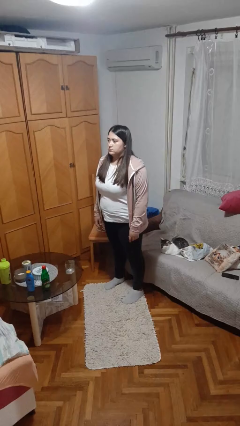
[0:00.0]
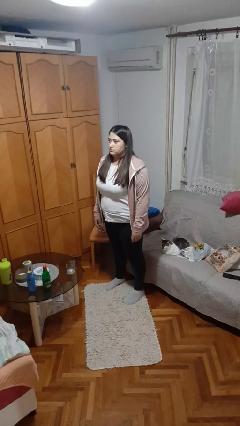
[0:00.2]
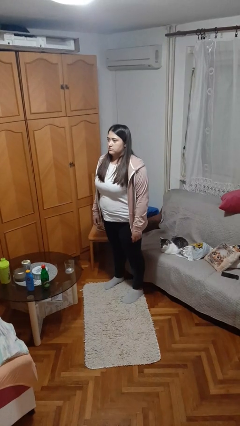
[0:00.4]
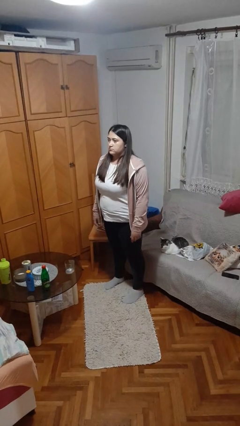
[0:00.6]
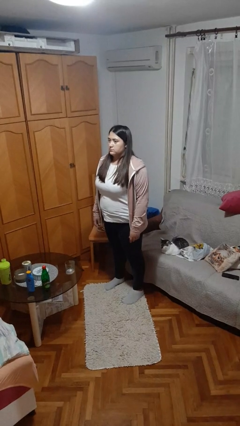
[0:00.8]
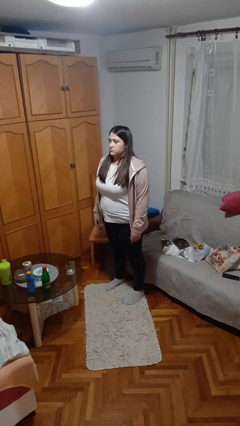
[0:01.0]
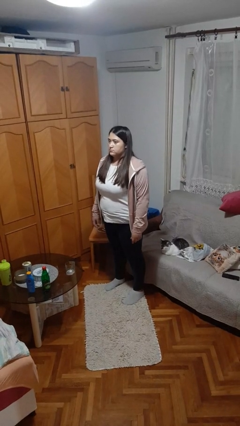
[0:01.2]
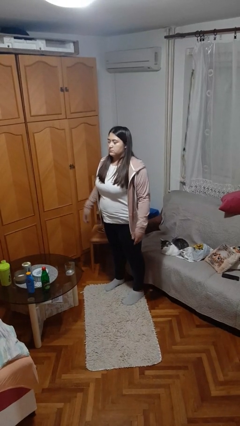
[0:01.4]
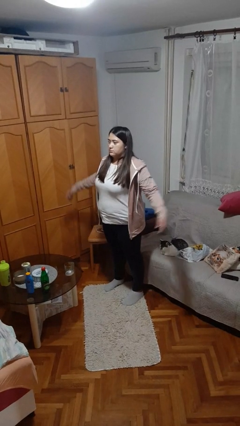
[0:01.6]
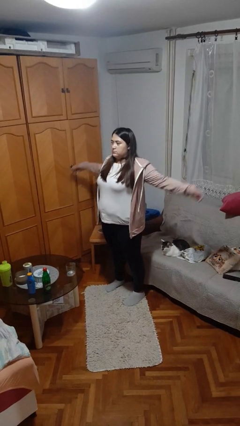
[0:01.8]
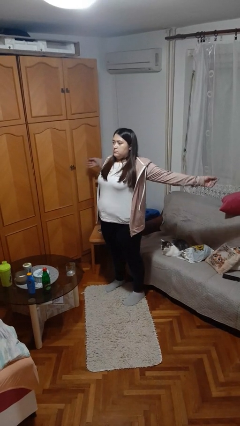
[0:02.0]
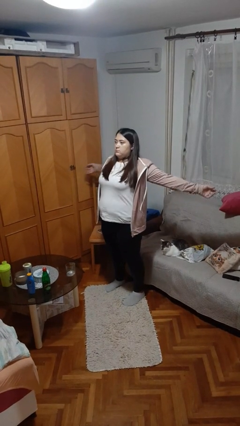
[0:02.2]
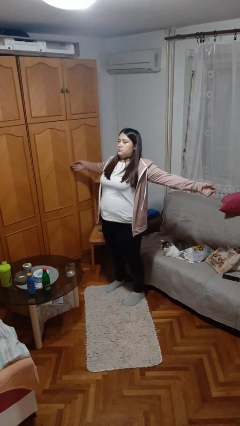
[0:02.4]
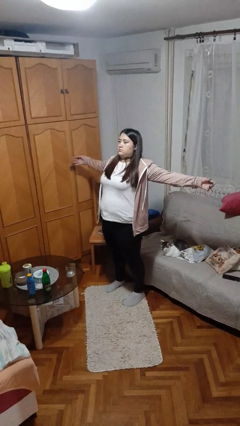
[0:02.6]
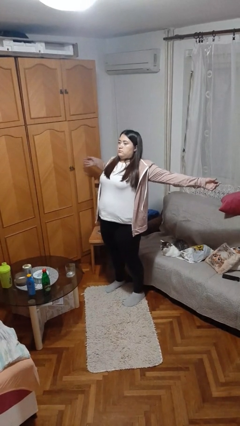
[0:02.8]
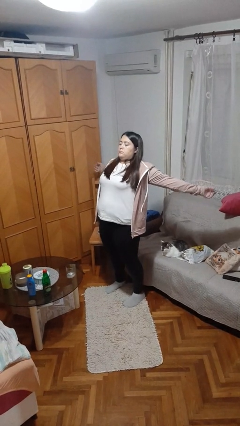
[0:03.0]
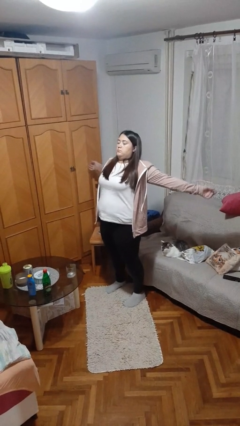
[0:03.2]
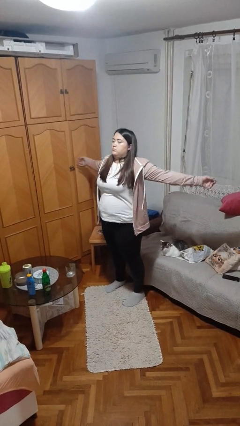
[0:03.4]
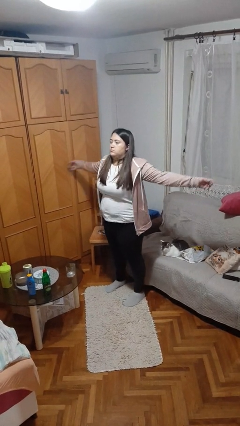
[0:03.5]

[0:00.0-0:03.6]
person stretches arms to side

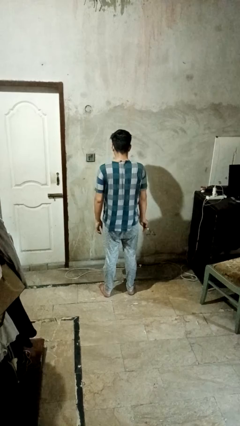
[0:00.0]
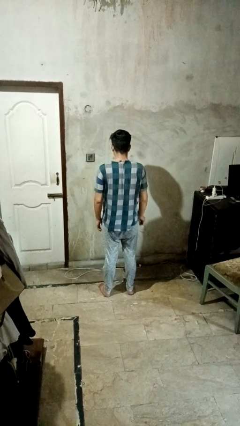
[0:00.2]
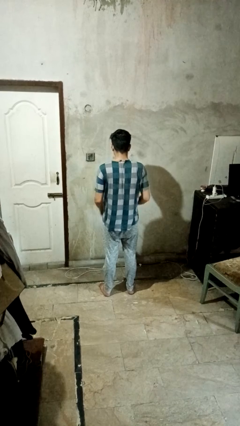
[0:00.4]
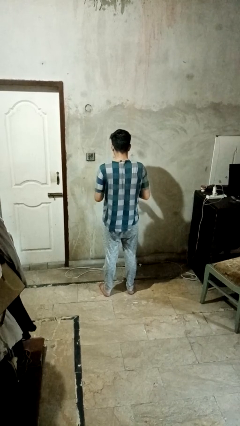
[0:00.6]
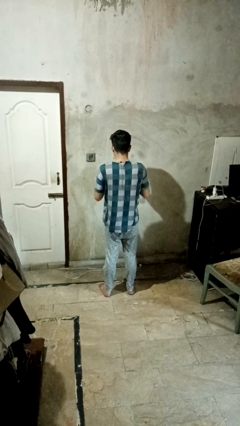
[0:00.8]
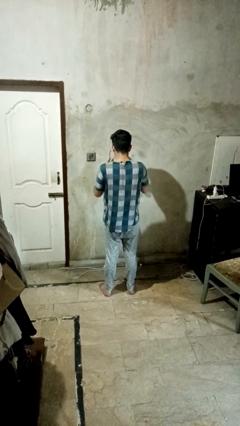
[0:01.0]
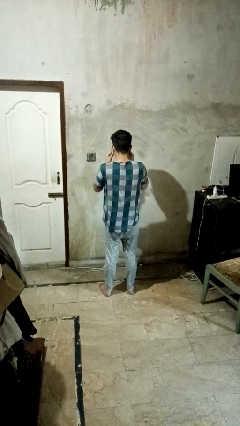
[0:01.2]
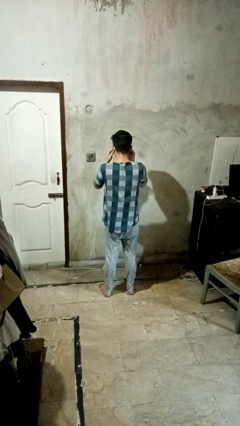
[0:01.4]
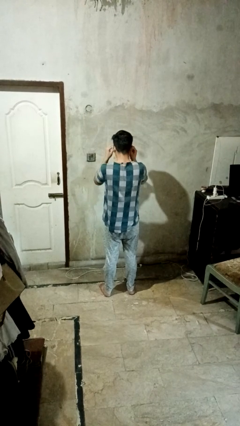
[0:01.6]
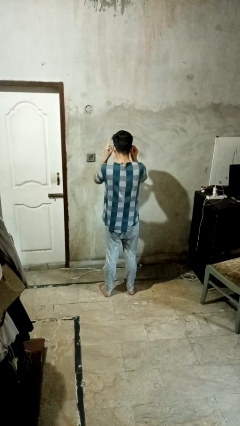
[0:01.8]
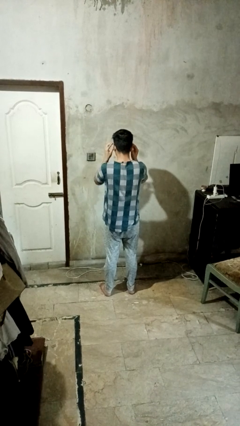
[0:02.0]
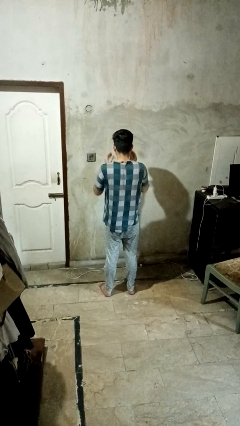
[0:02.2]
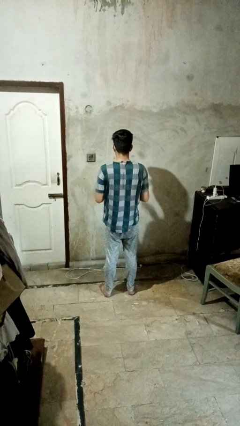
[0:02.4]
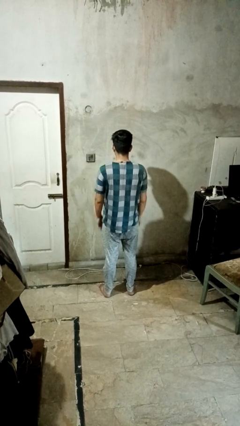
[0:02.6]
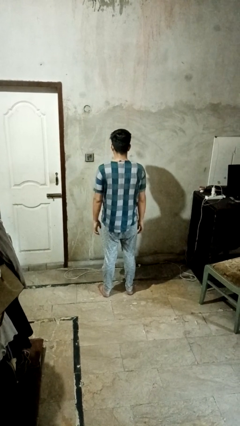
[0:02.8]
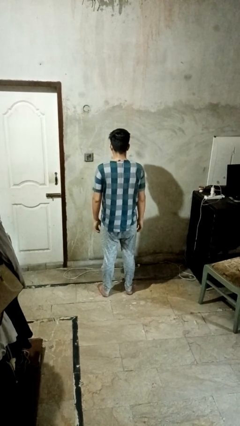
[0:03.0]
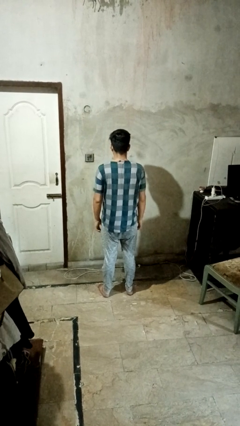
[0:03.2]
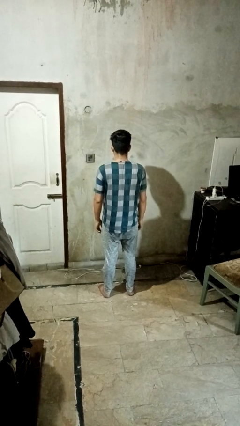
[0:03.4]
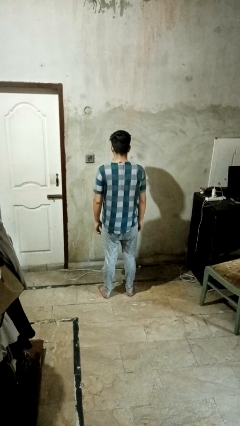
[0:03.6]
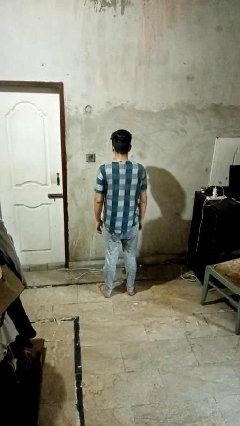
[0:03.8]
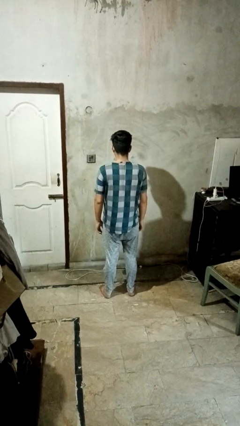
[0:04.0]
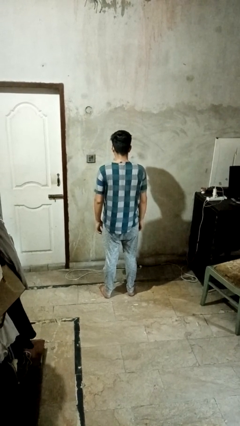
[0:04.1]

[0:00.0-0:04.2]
person puts on glasses

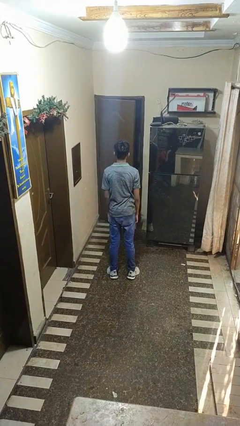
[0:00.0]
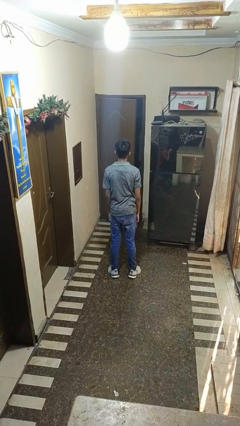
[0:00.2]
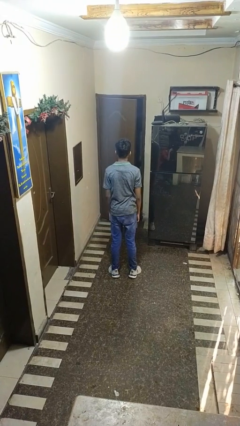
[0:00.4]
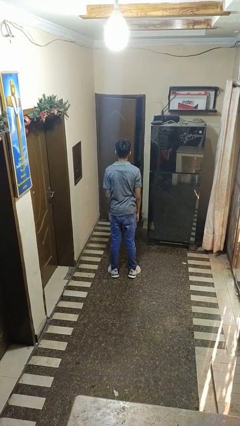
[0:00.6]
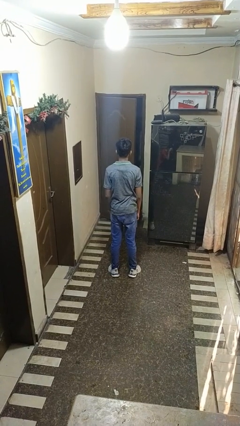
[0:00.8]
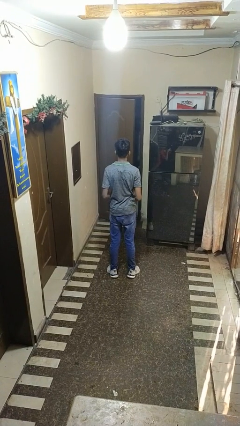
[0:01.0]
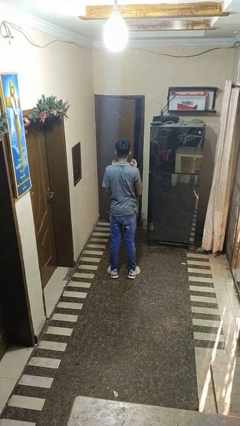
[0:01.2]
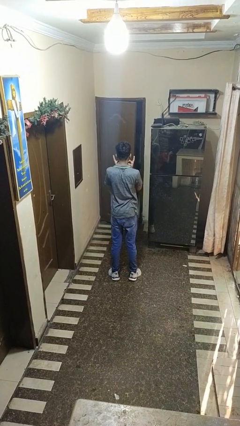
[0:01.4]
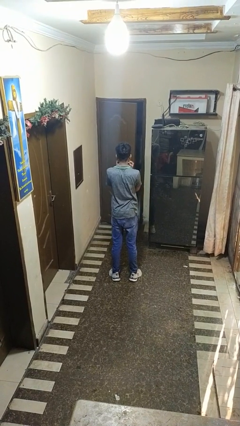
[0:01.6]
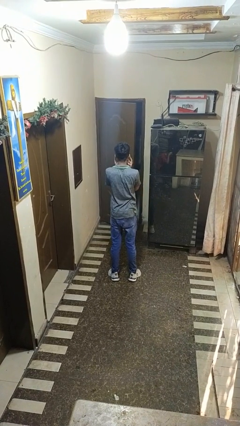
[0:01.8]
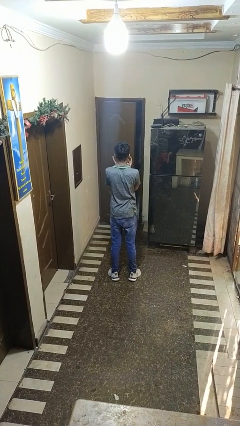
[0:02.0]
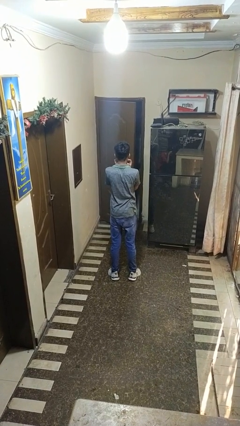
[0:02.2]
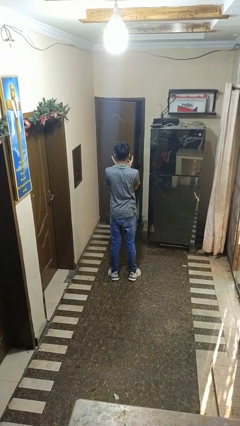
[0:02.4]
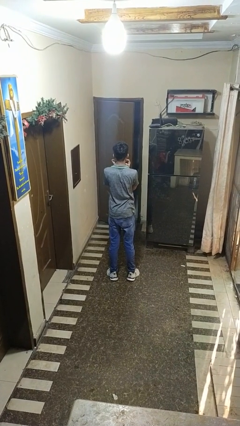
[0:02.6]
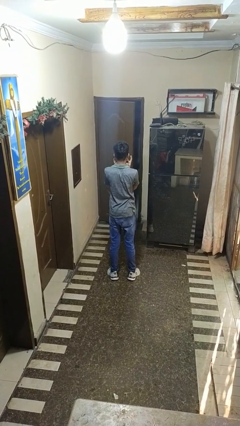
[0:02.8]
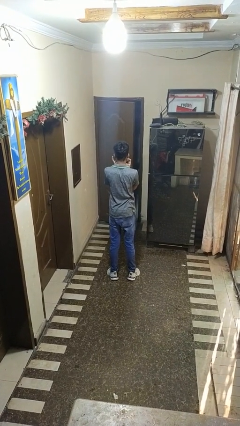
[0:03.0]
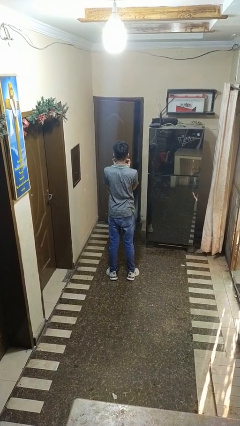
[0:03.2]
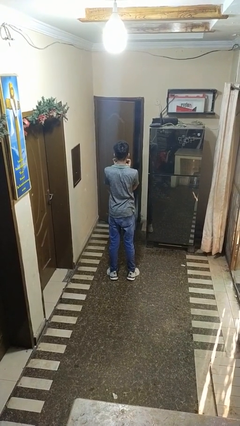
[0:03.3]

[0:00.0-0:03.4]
person touches earlobe

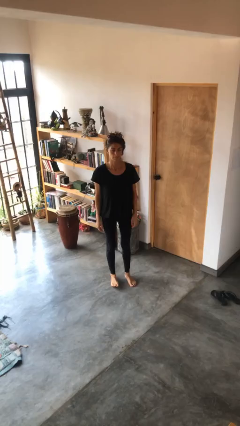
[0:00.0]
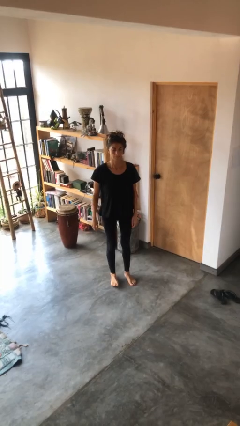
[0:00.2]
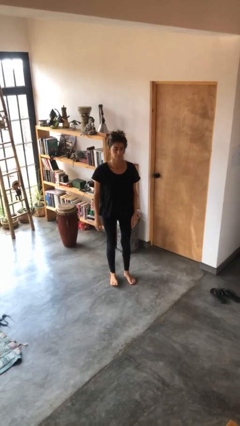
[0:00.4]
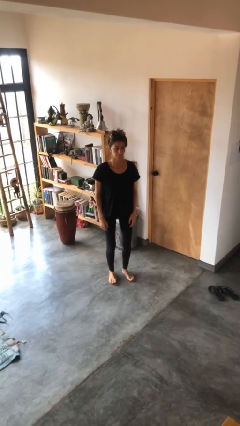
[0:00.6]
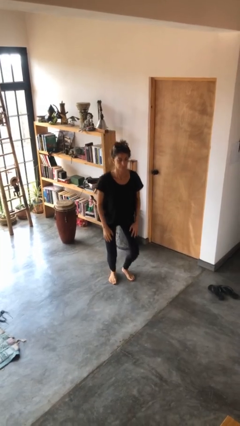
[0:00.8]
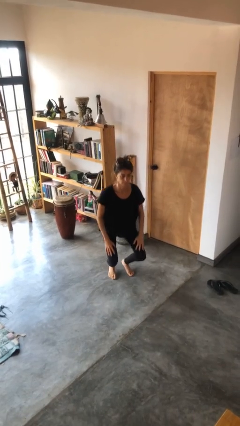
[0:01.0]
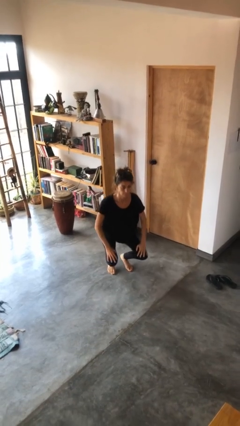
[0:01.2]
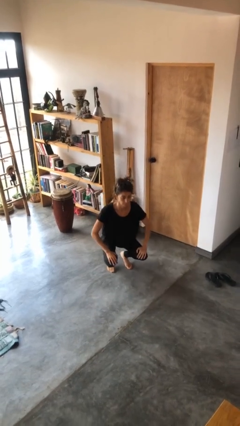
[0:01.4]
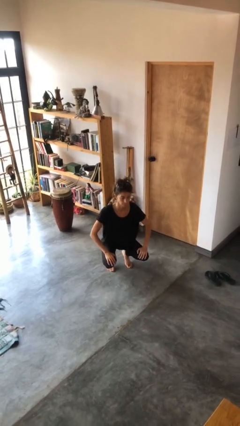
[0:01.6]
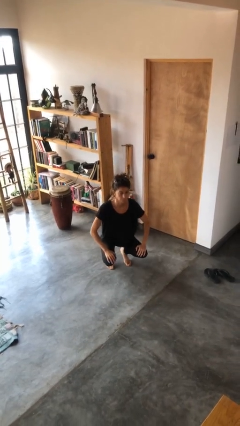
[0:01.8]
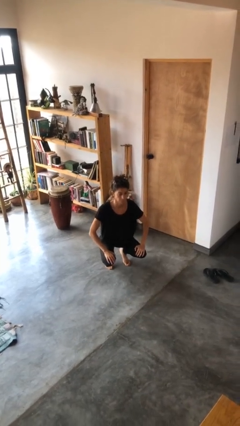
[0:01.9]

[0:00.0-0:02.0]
person squats

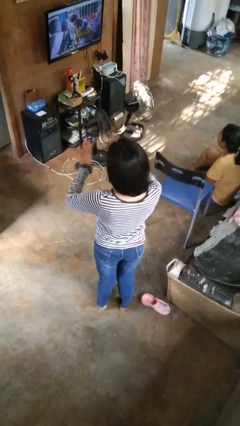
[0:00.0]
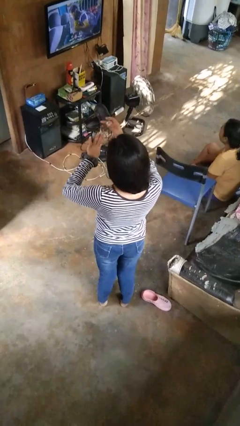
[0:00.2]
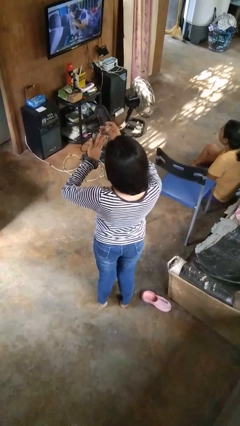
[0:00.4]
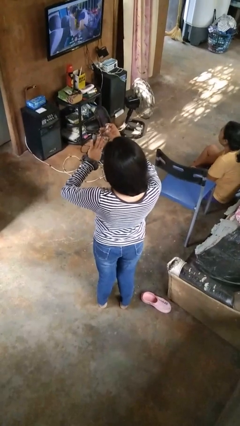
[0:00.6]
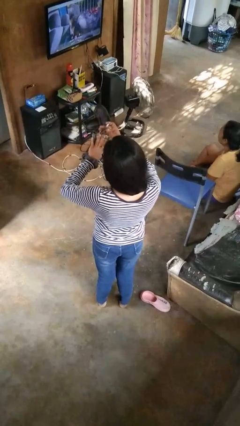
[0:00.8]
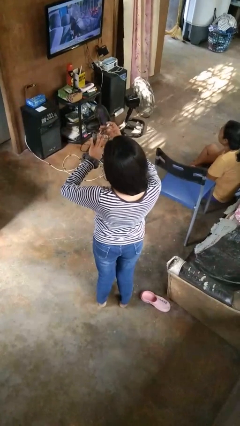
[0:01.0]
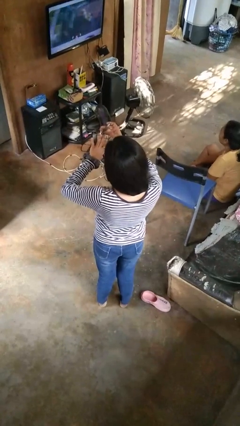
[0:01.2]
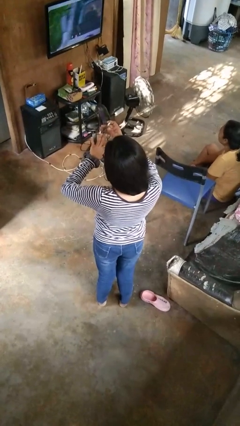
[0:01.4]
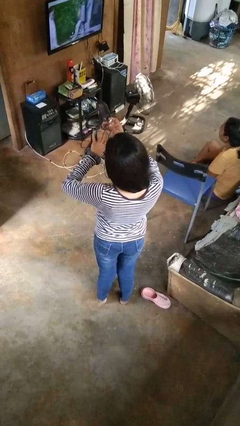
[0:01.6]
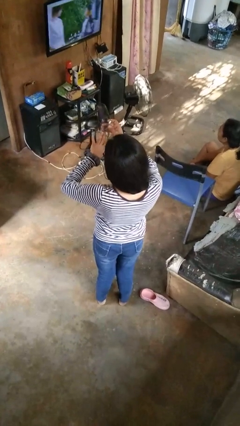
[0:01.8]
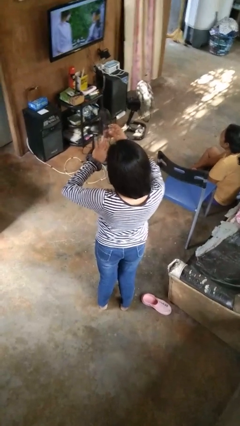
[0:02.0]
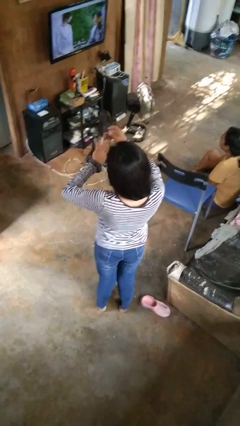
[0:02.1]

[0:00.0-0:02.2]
person clips fingernails

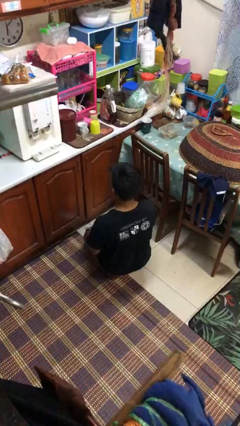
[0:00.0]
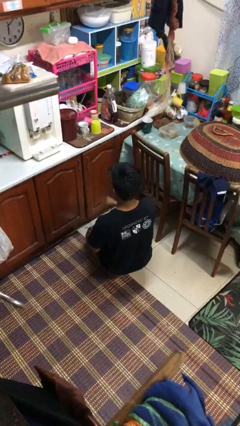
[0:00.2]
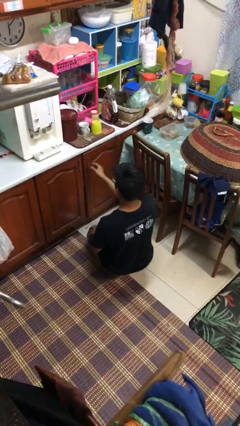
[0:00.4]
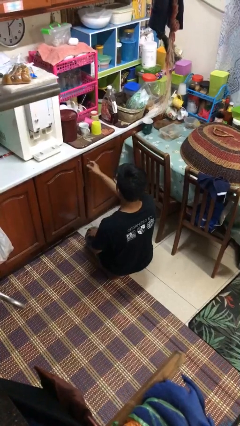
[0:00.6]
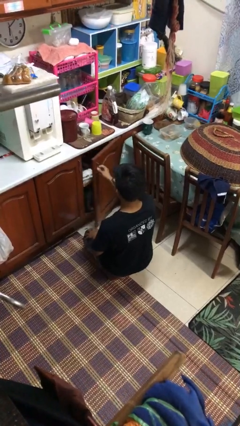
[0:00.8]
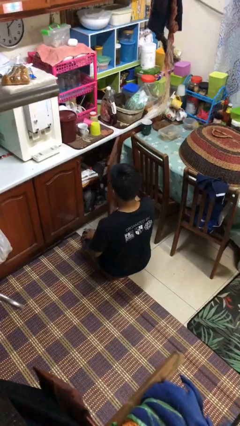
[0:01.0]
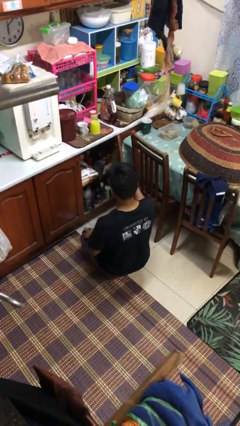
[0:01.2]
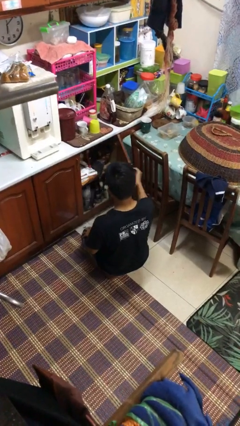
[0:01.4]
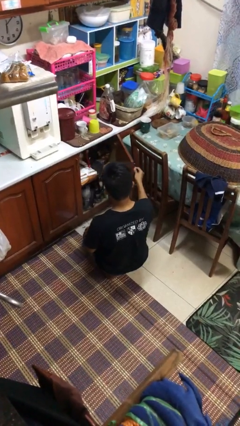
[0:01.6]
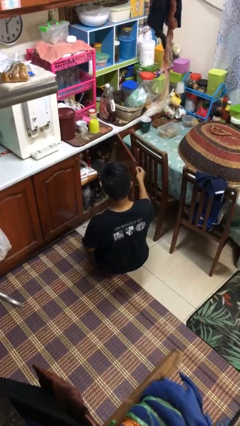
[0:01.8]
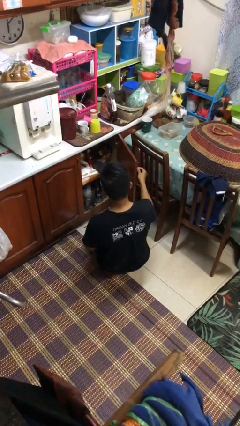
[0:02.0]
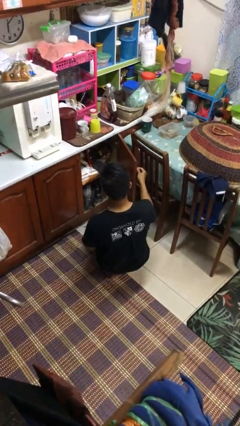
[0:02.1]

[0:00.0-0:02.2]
person opens kitchen drawer
